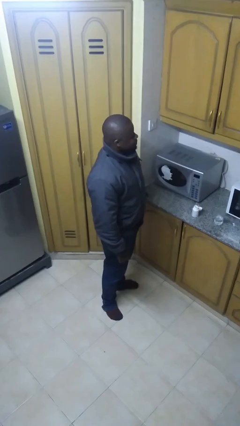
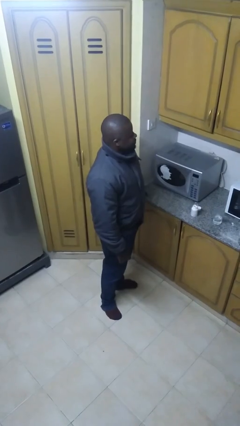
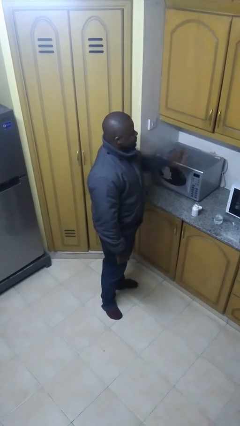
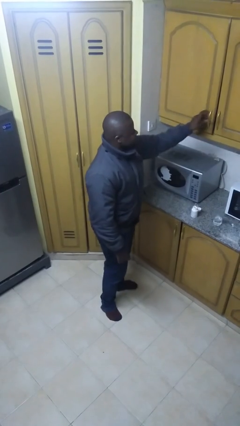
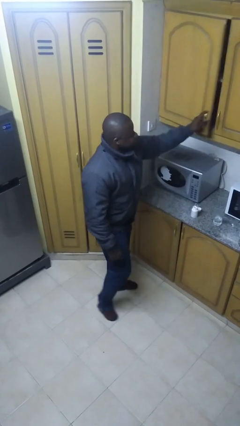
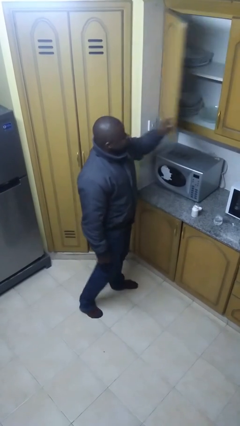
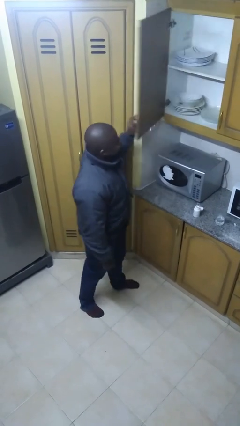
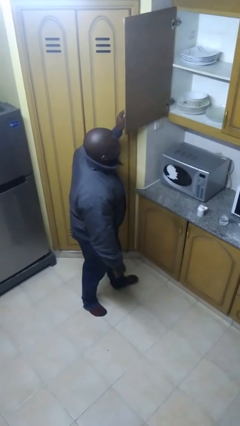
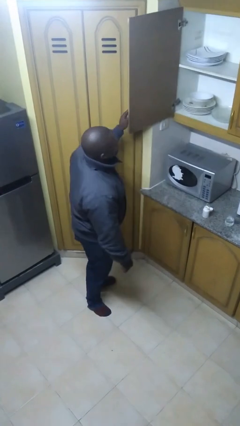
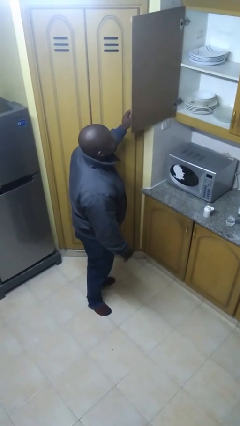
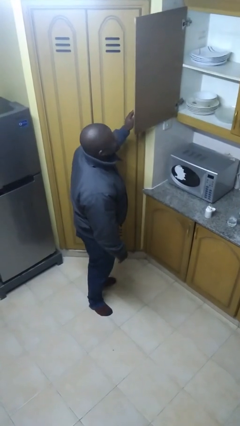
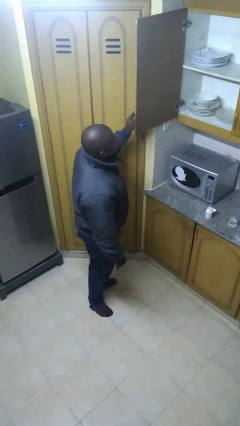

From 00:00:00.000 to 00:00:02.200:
person closes cabinet

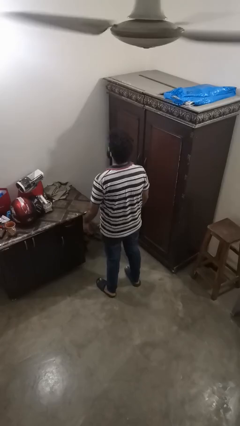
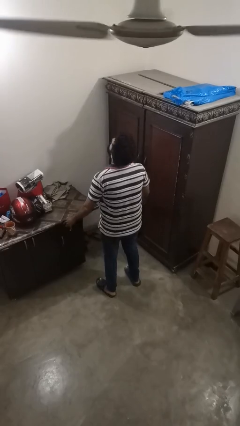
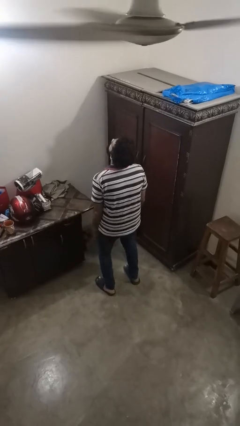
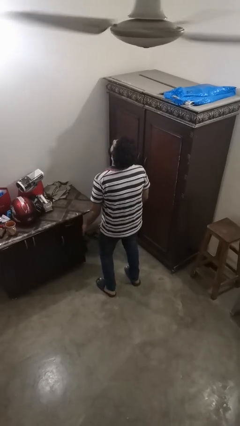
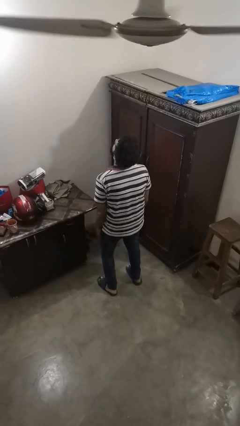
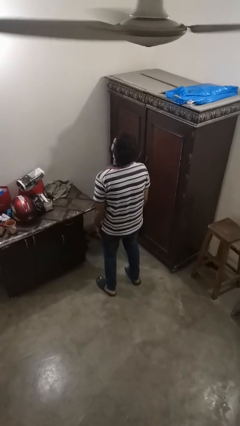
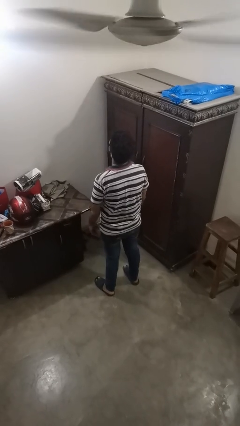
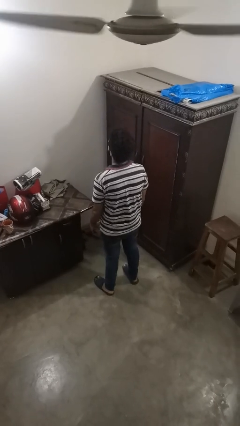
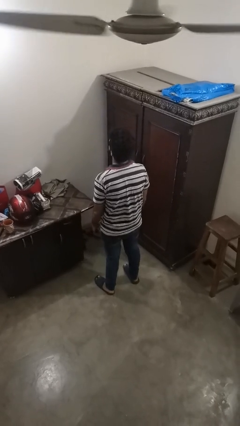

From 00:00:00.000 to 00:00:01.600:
person slaps hands on thighs

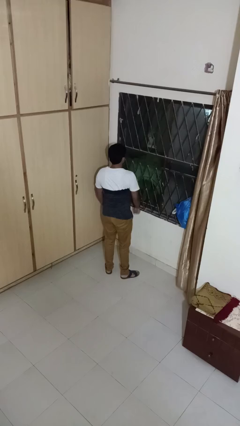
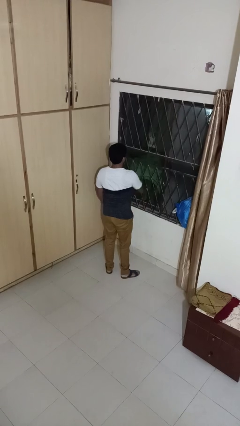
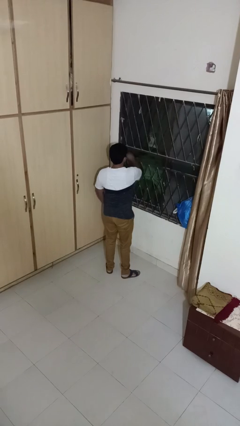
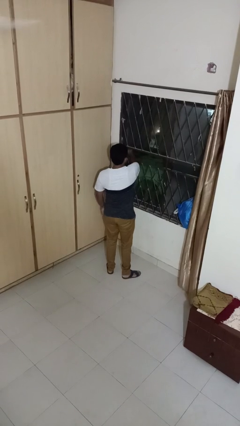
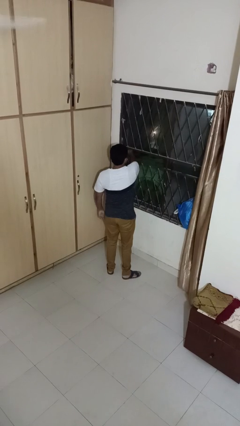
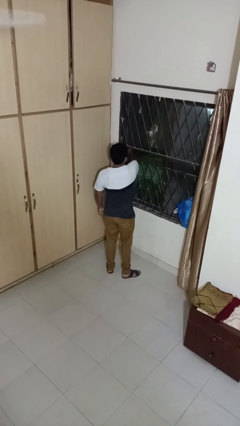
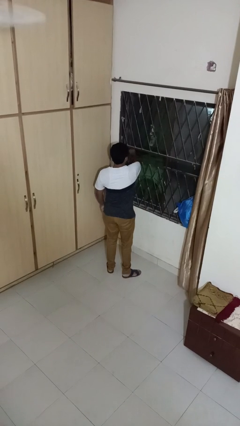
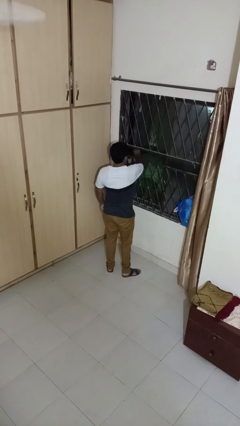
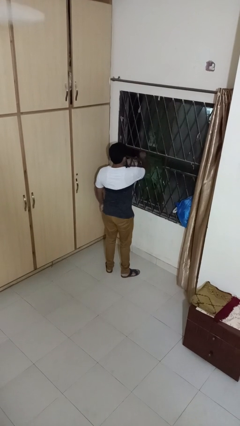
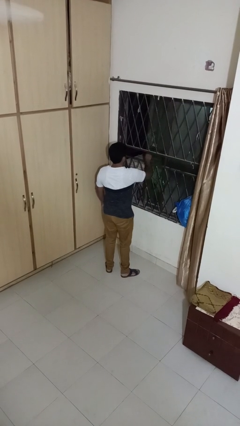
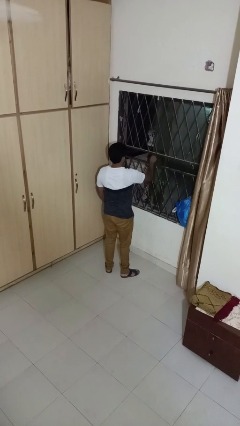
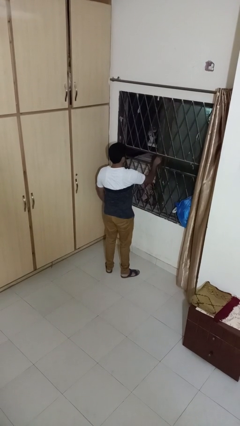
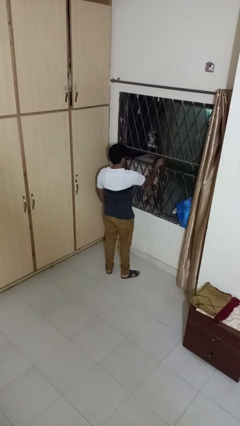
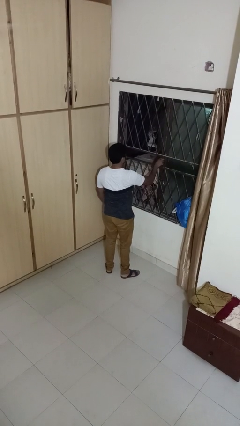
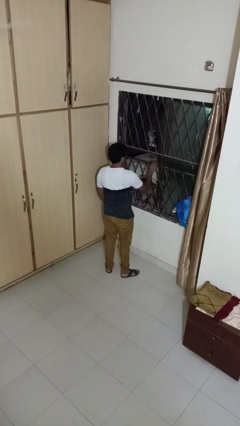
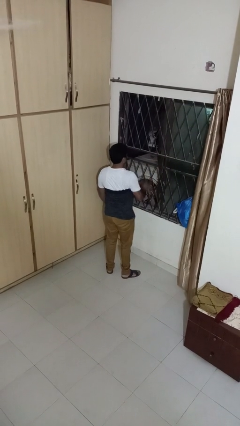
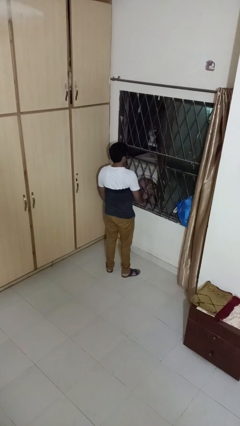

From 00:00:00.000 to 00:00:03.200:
person opens home window

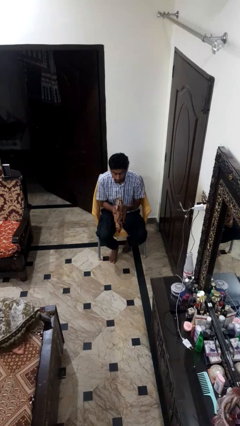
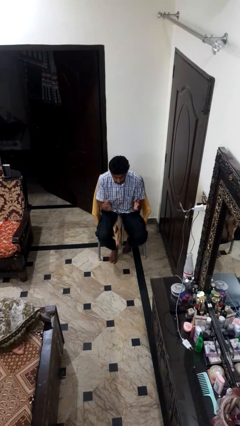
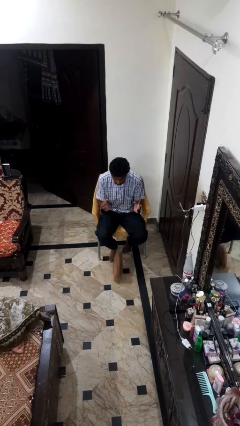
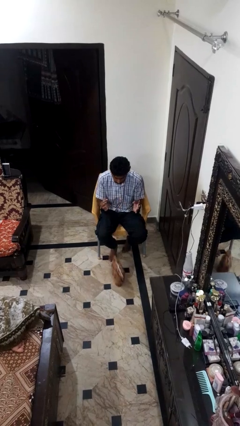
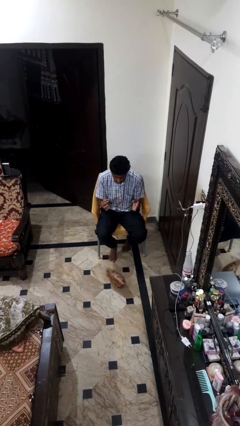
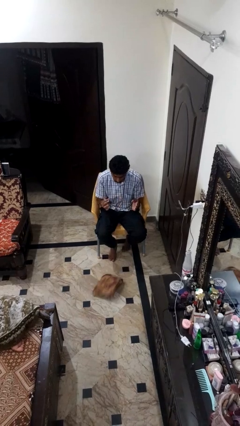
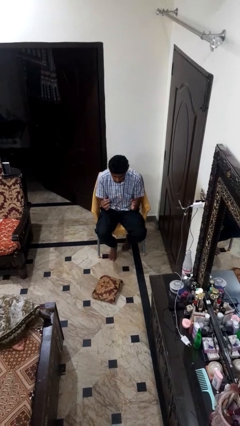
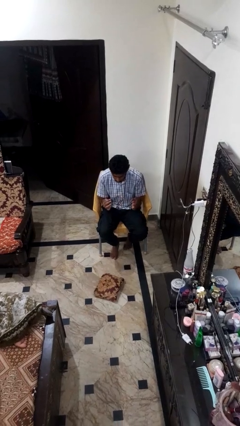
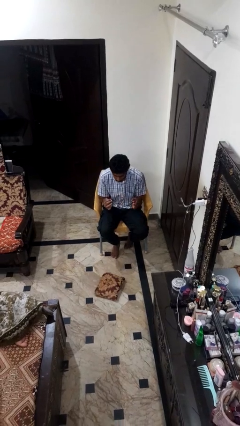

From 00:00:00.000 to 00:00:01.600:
person drops object

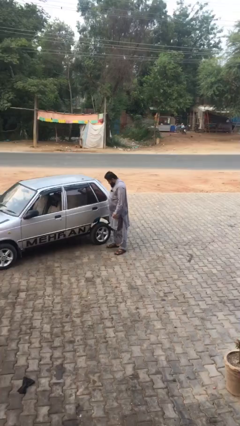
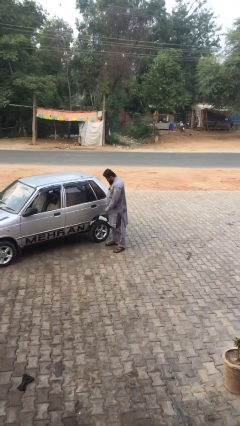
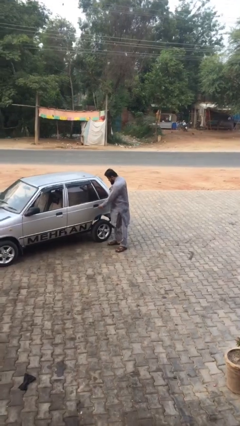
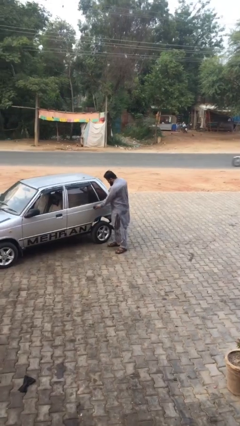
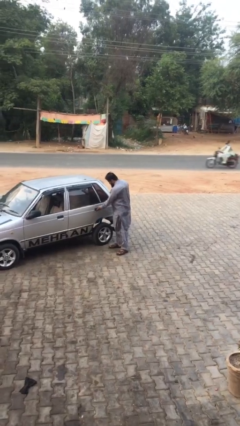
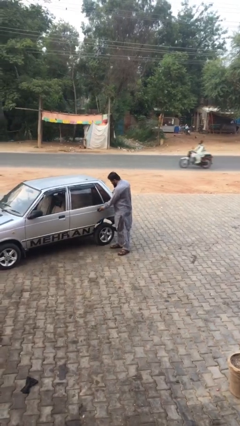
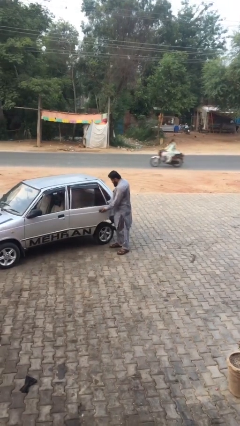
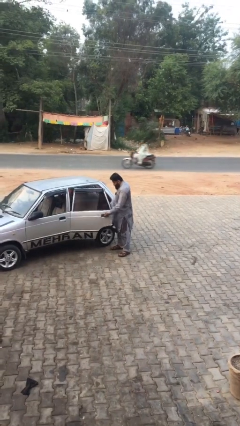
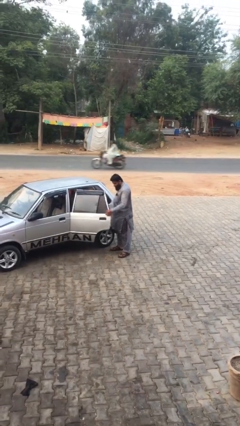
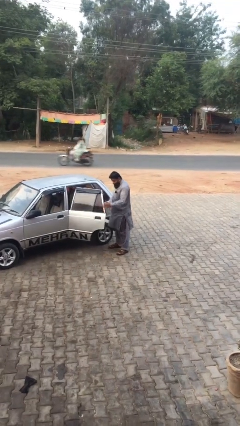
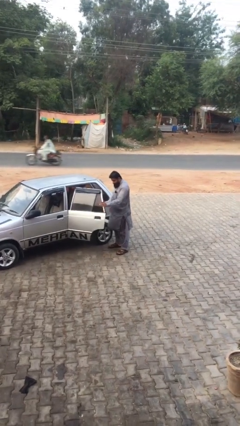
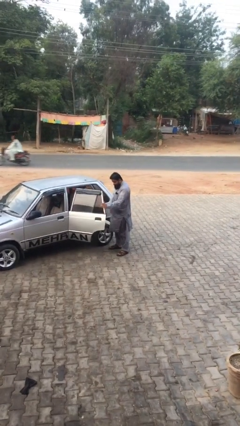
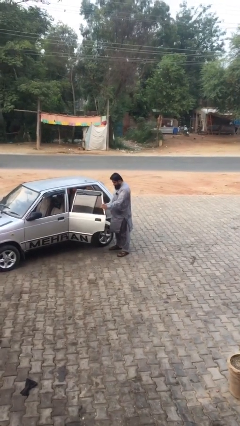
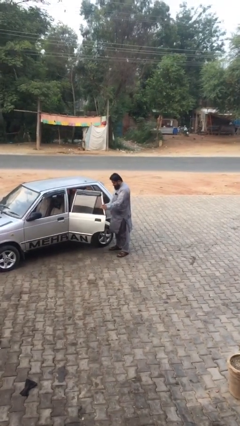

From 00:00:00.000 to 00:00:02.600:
person opens car door

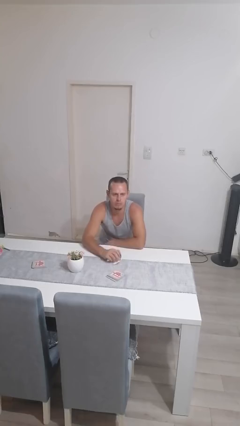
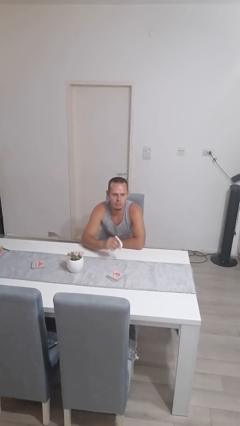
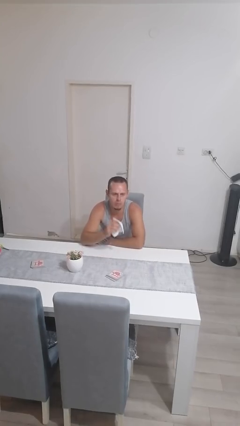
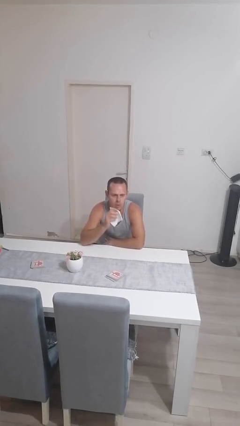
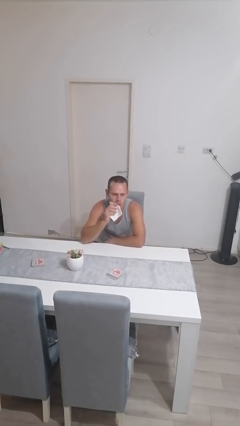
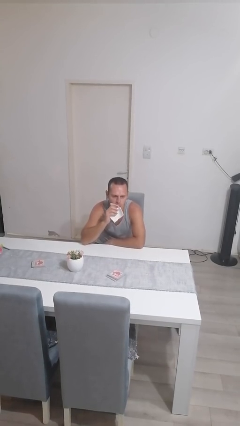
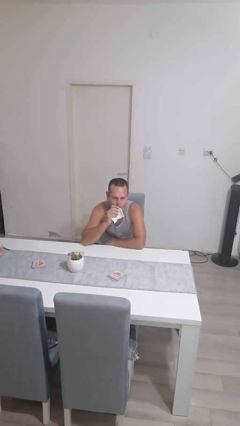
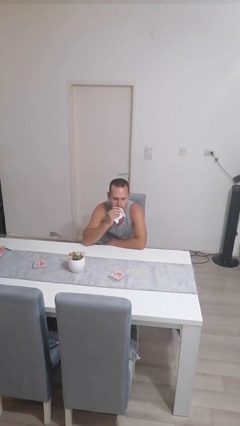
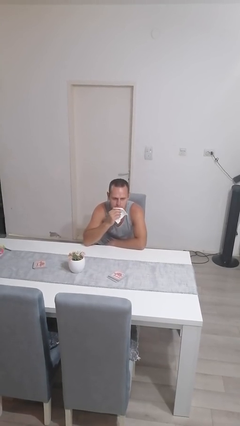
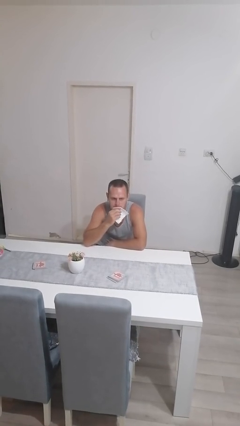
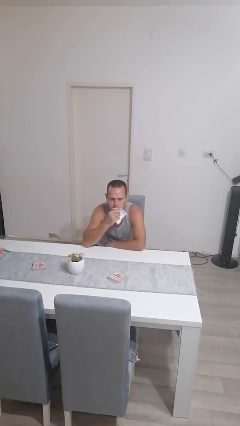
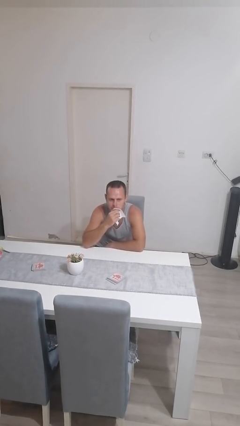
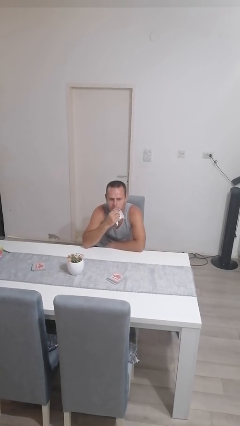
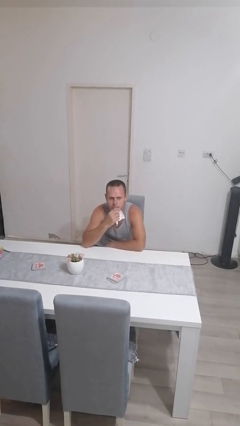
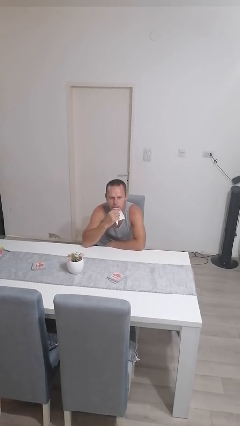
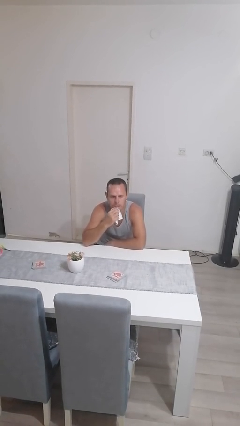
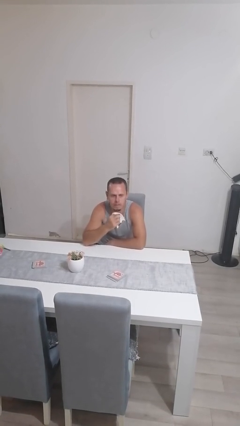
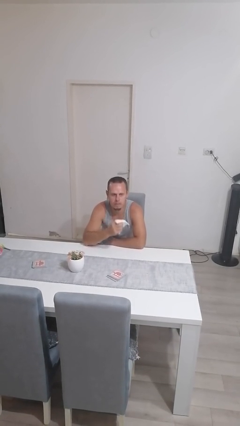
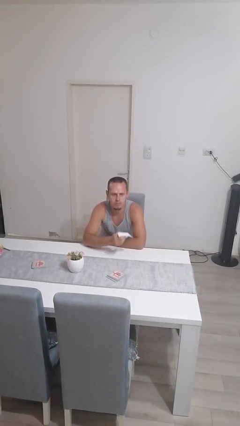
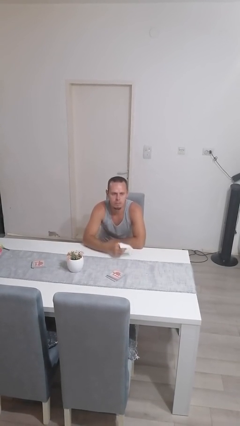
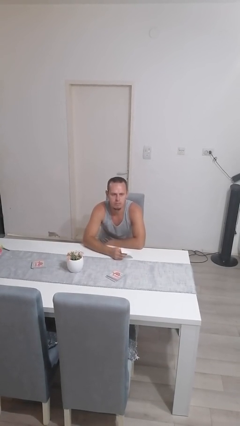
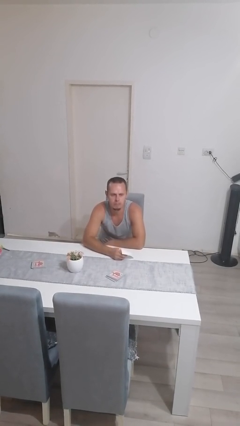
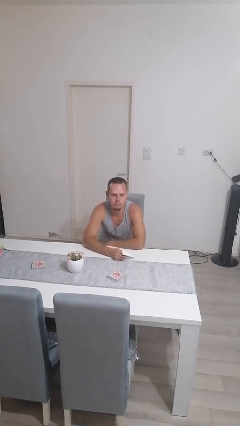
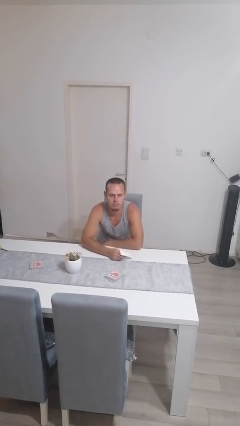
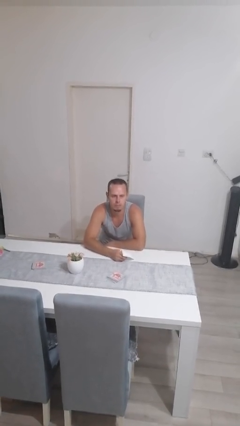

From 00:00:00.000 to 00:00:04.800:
person wipes mouth with napkin

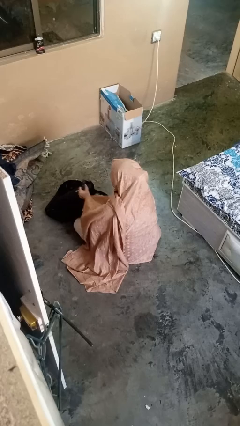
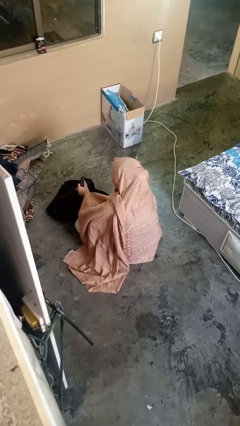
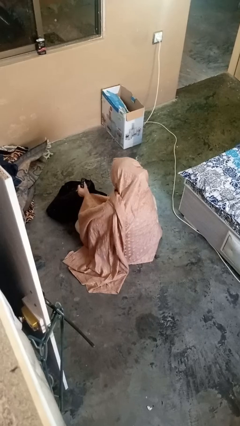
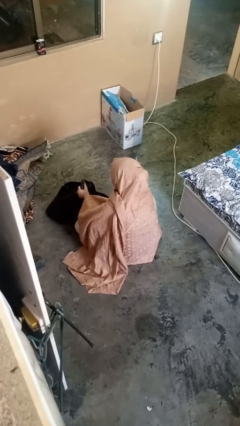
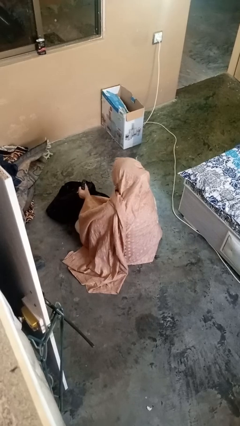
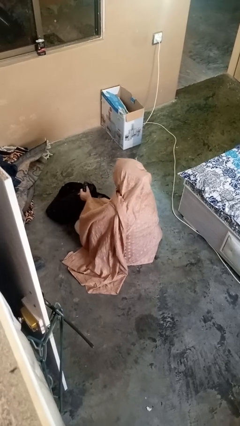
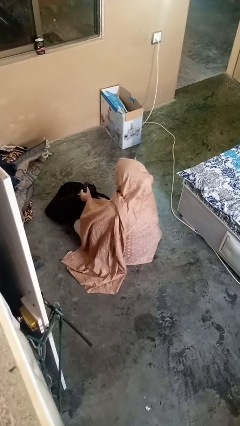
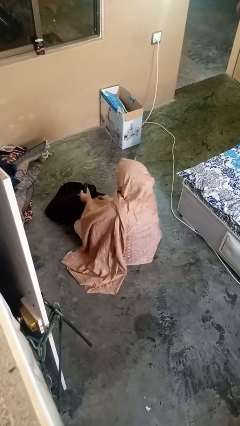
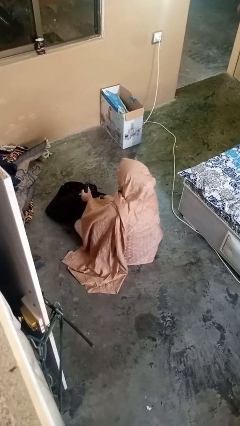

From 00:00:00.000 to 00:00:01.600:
person searches in backpack
